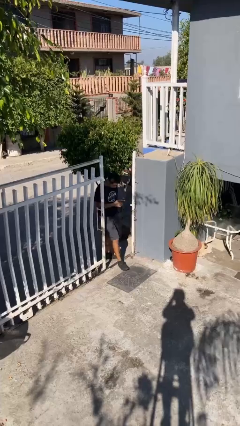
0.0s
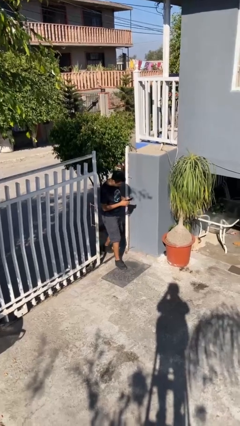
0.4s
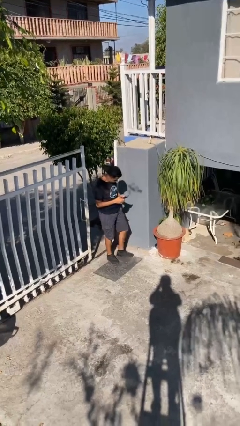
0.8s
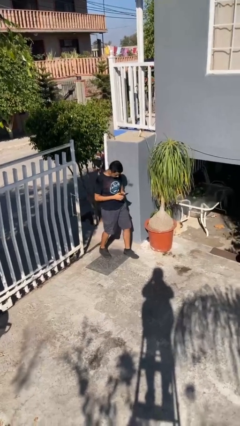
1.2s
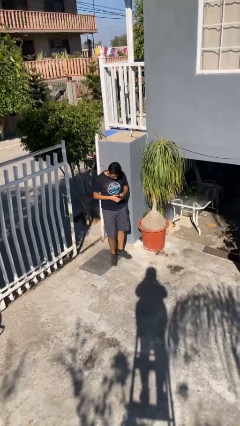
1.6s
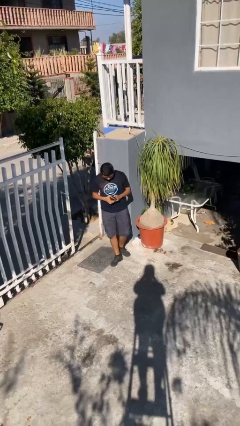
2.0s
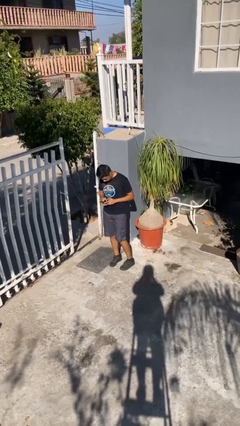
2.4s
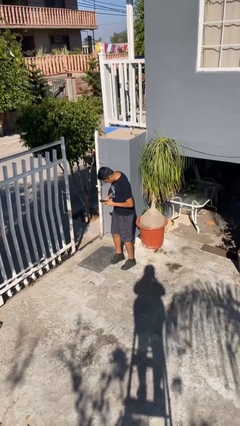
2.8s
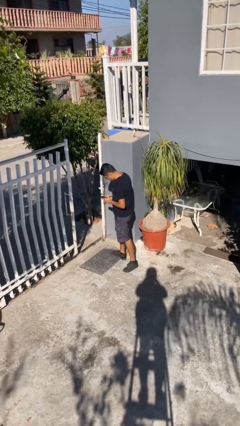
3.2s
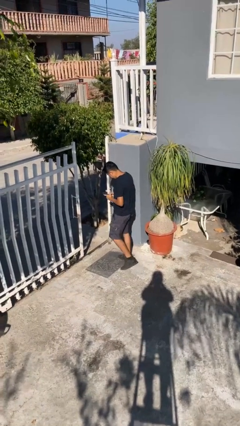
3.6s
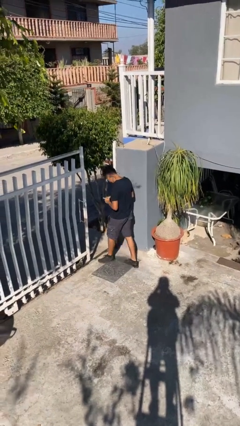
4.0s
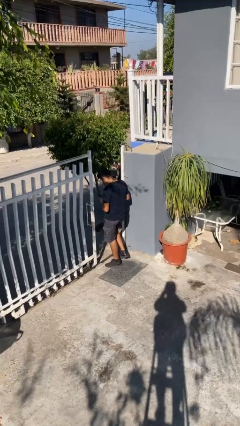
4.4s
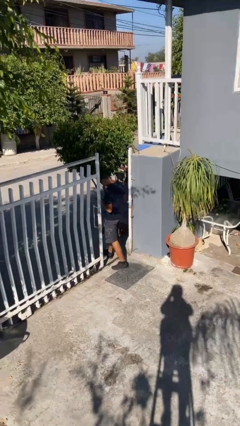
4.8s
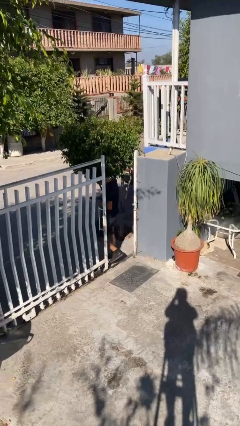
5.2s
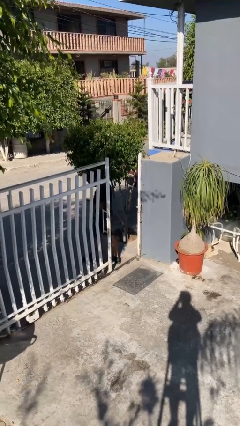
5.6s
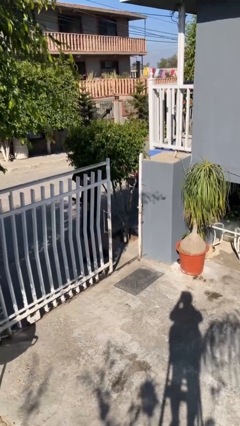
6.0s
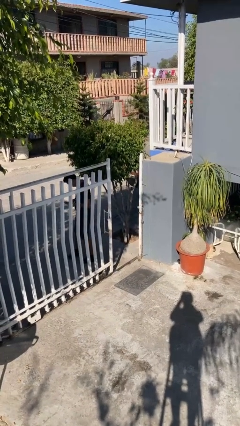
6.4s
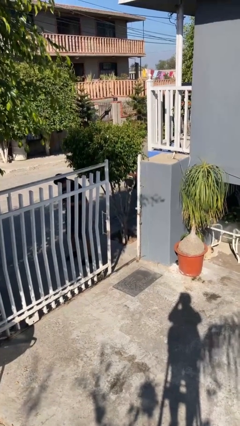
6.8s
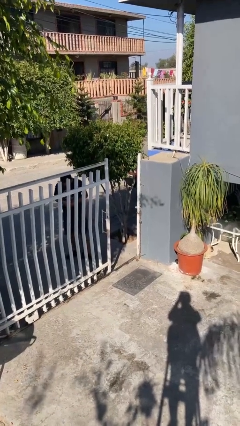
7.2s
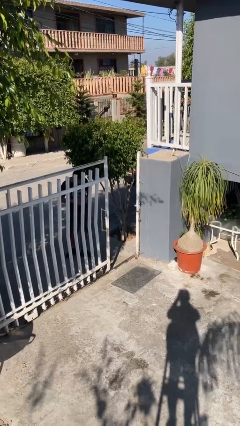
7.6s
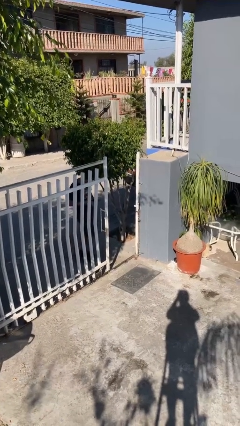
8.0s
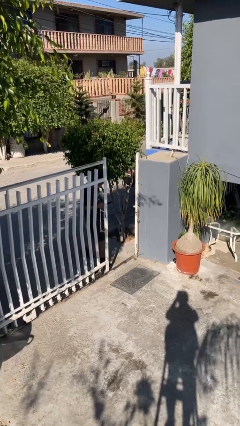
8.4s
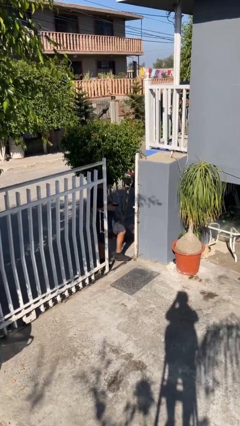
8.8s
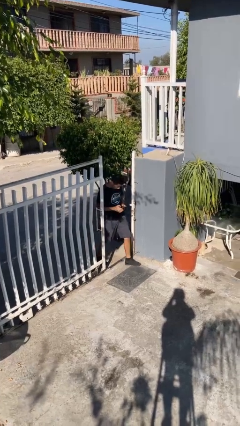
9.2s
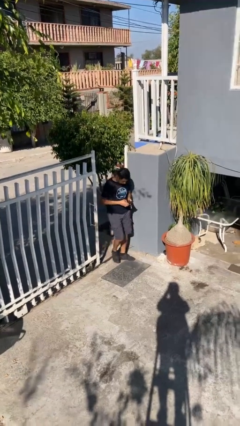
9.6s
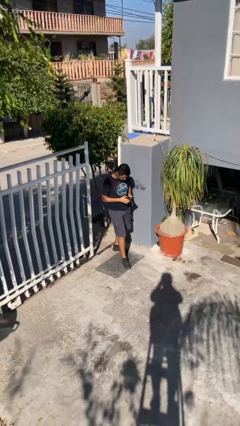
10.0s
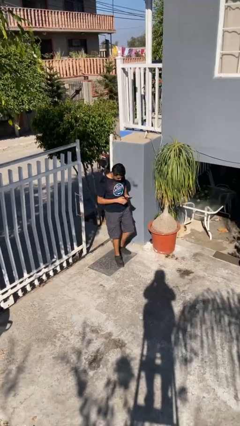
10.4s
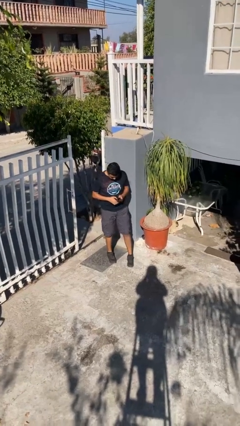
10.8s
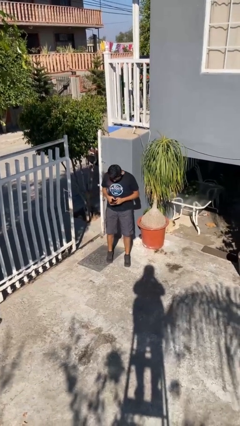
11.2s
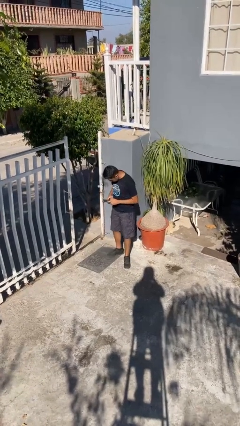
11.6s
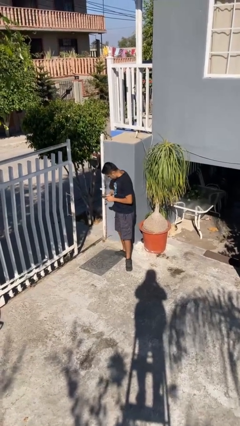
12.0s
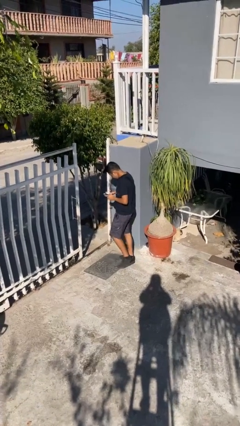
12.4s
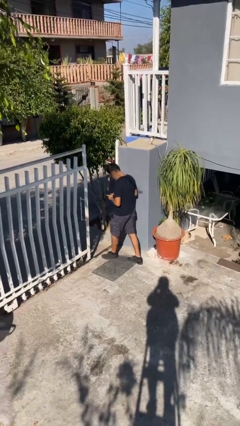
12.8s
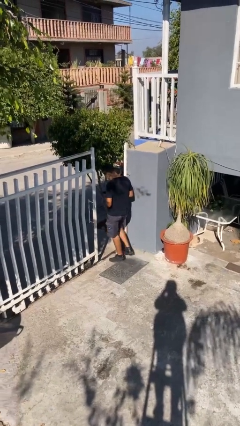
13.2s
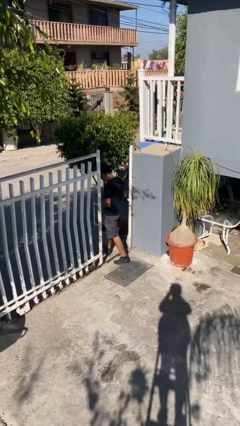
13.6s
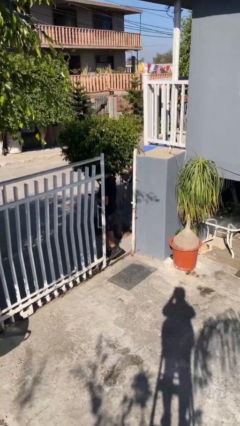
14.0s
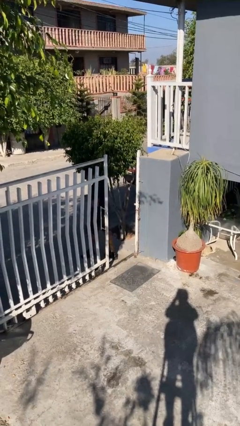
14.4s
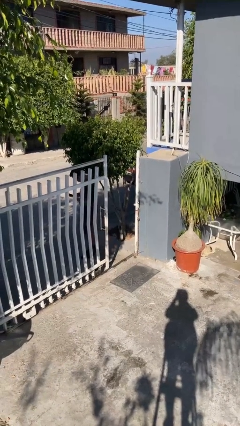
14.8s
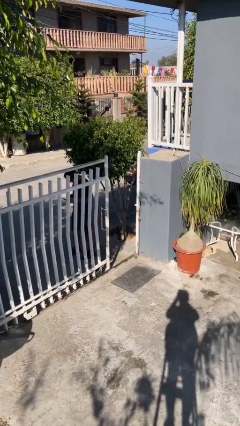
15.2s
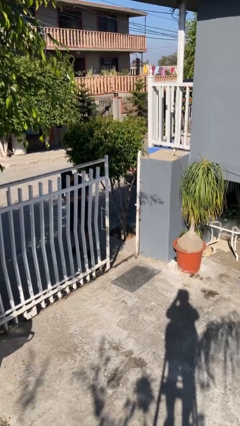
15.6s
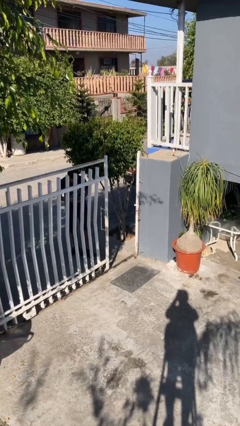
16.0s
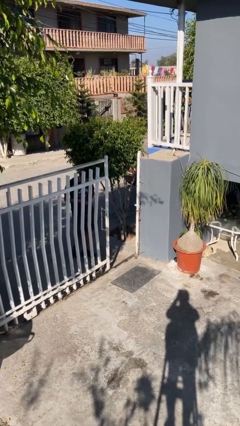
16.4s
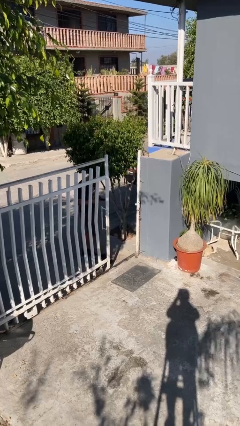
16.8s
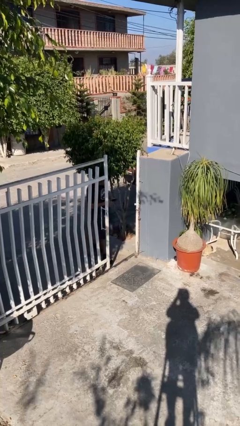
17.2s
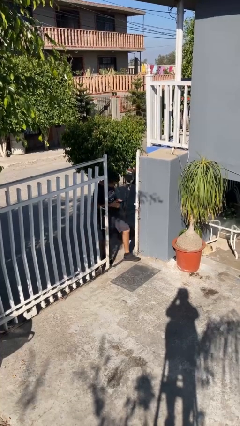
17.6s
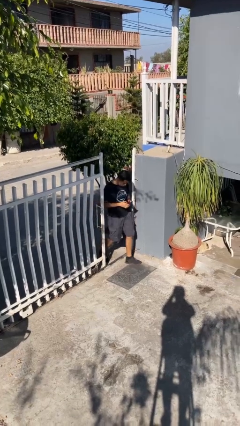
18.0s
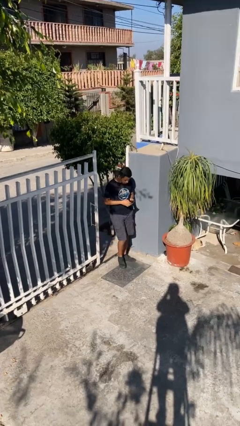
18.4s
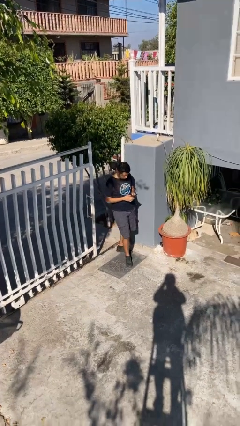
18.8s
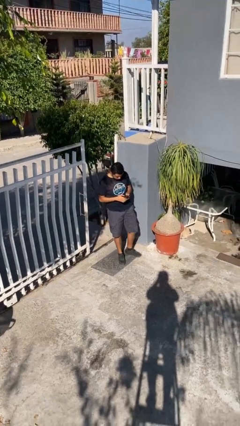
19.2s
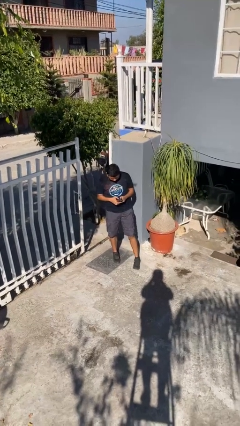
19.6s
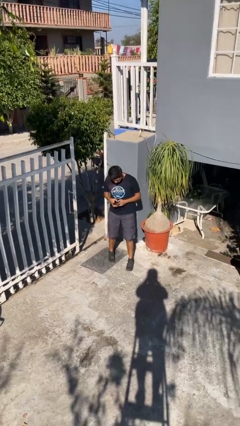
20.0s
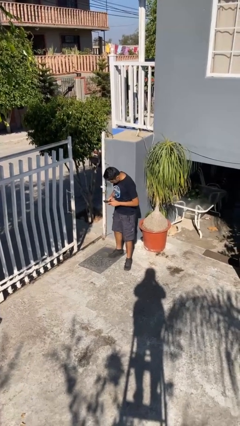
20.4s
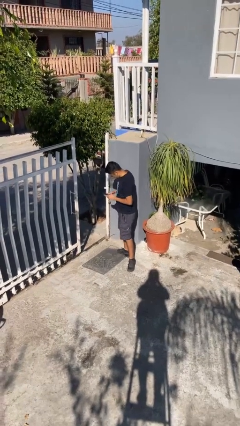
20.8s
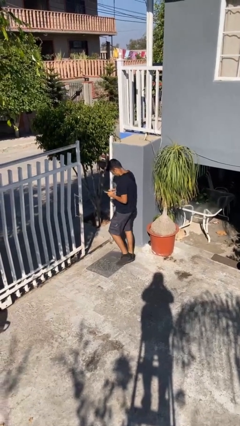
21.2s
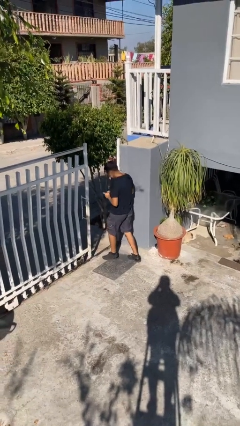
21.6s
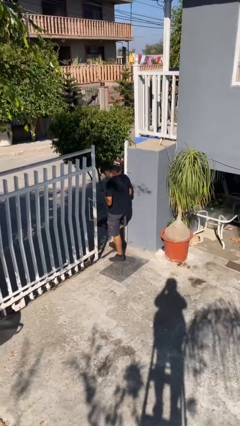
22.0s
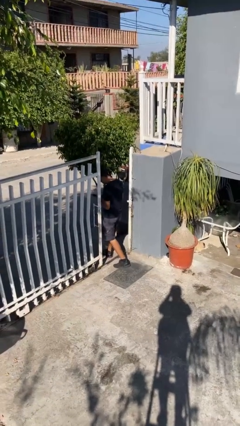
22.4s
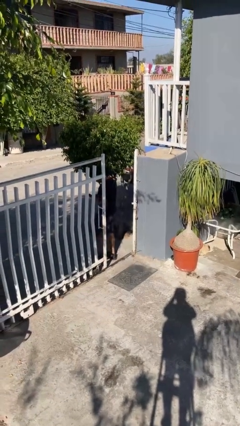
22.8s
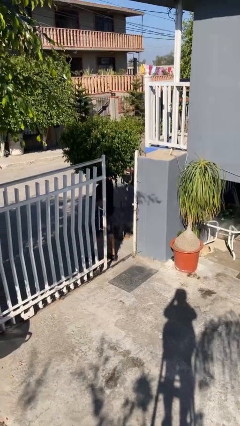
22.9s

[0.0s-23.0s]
person texts on phone

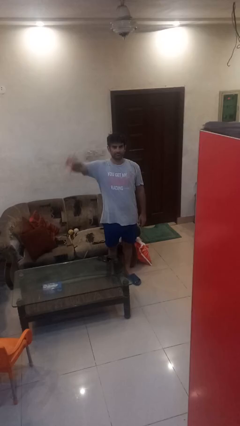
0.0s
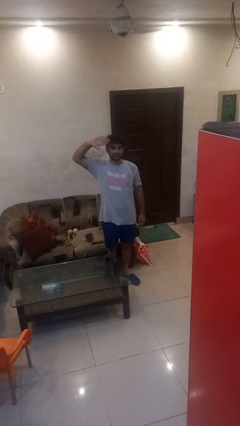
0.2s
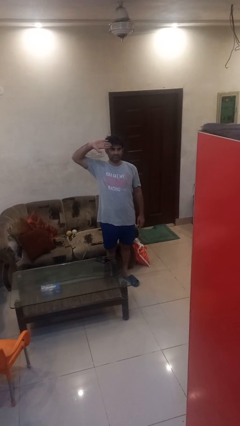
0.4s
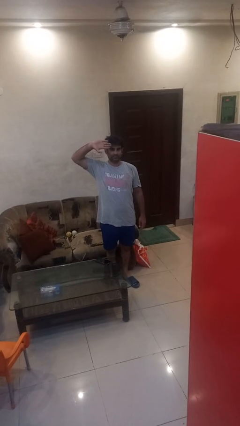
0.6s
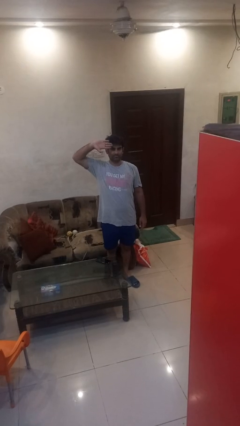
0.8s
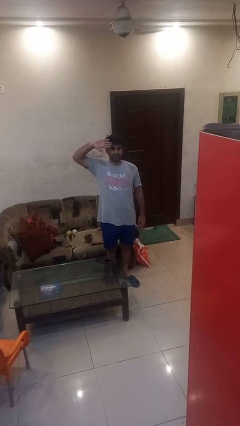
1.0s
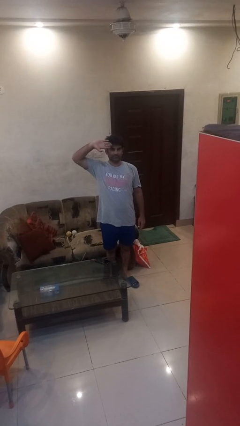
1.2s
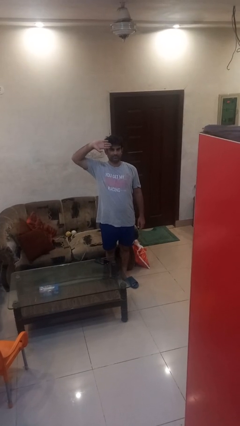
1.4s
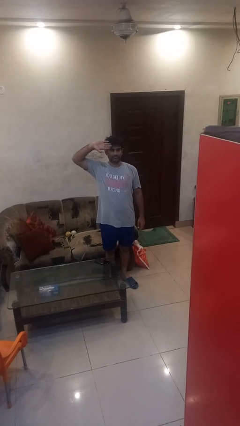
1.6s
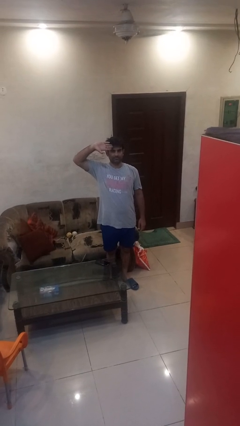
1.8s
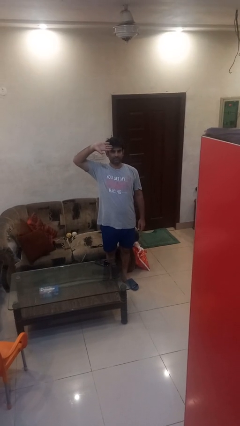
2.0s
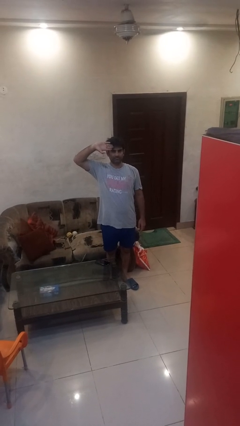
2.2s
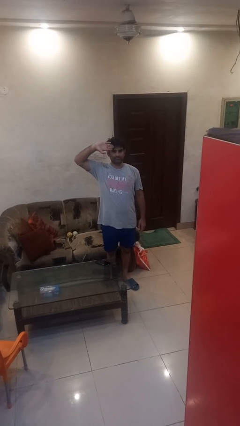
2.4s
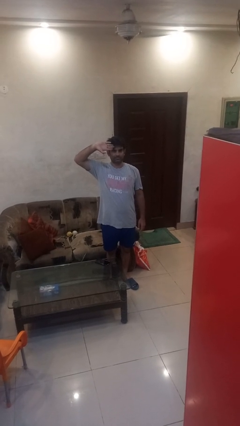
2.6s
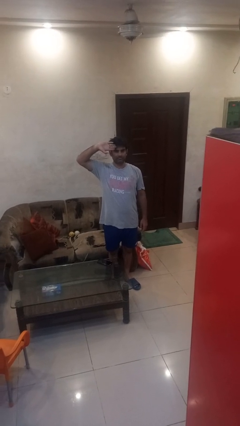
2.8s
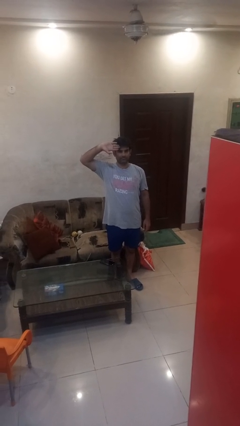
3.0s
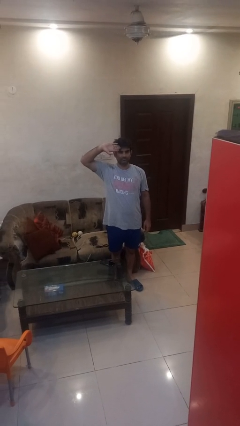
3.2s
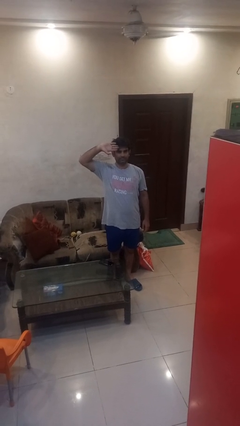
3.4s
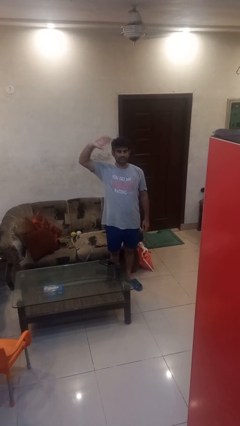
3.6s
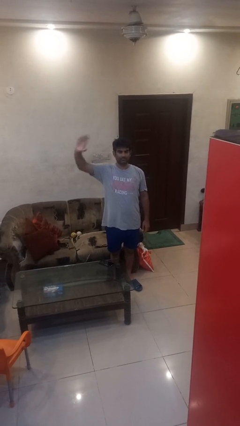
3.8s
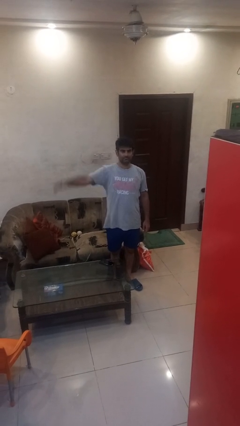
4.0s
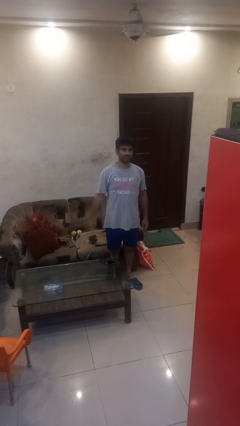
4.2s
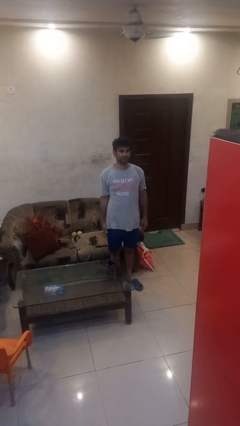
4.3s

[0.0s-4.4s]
person salutes

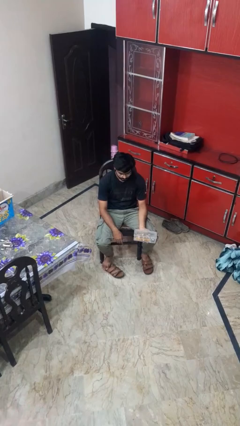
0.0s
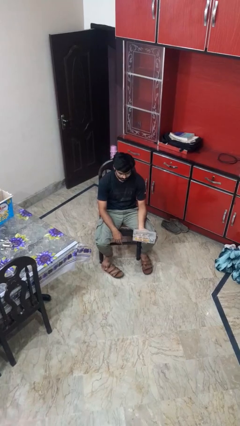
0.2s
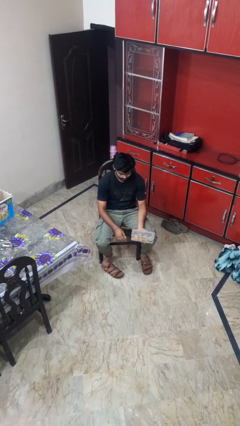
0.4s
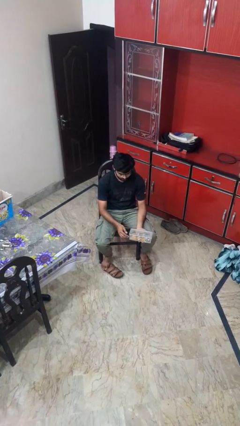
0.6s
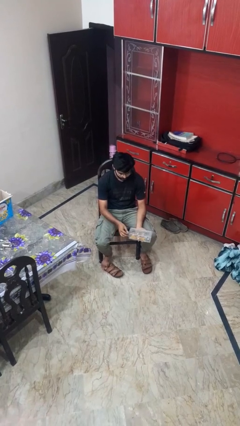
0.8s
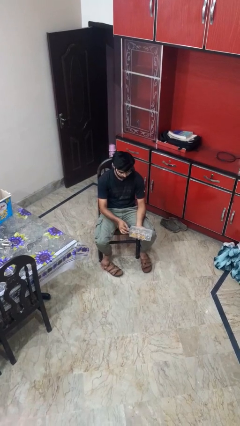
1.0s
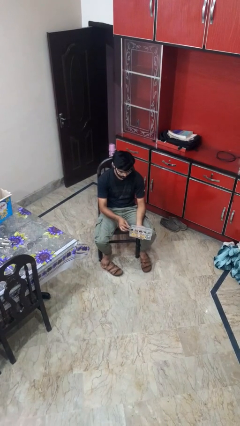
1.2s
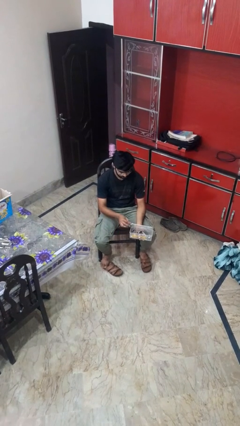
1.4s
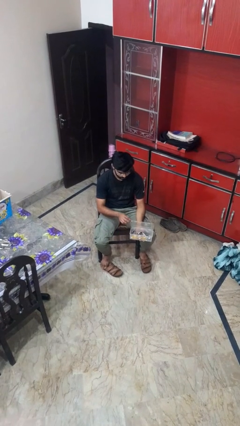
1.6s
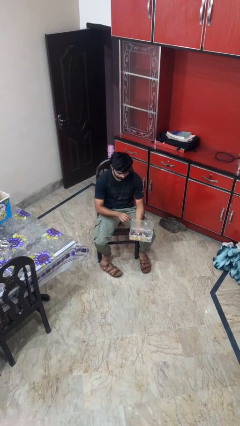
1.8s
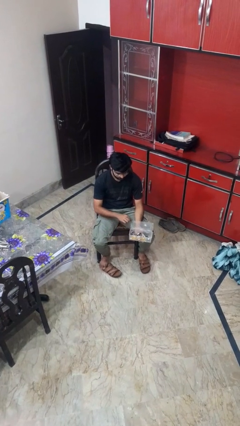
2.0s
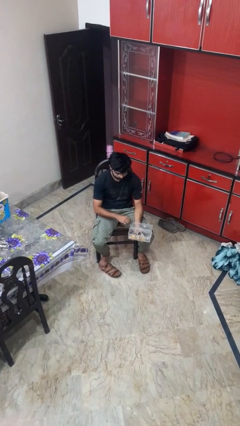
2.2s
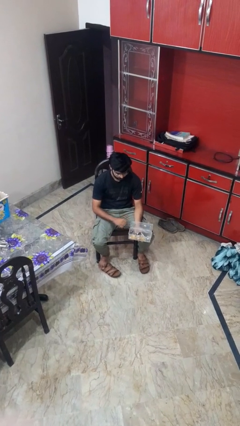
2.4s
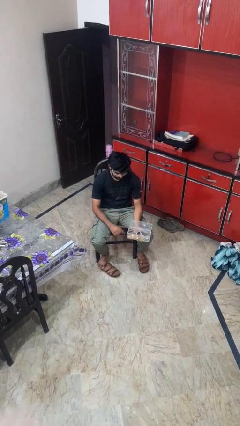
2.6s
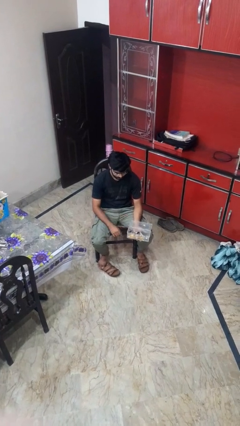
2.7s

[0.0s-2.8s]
person opens jewelry box
